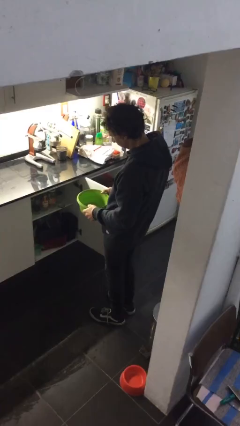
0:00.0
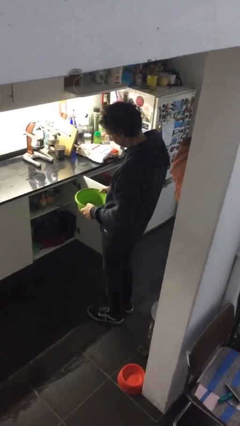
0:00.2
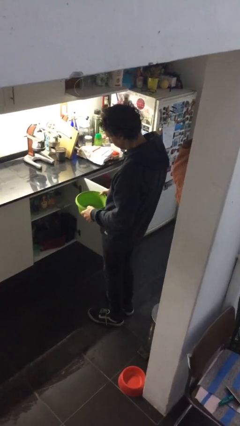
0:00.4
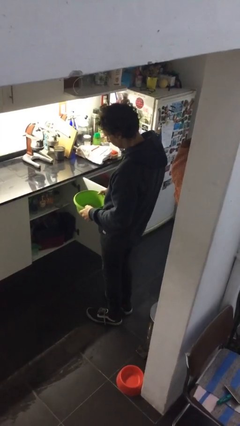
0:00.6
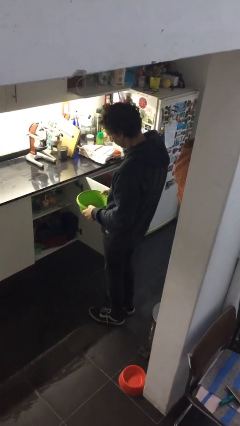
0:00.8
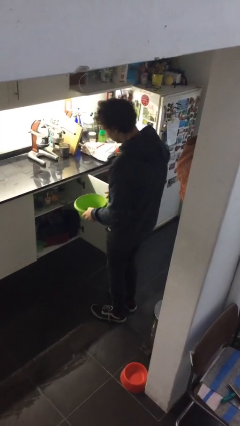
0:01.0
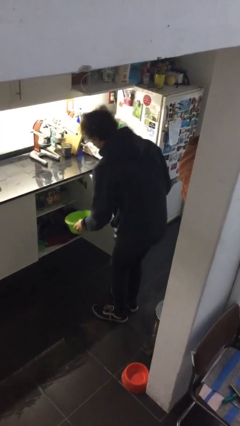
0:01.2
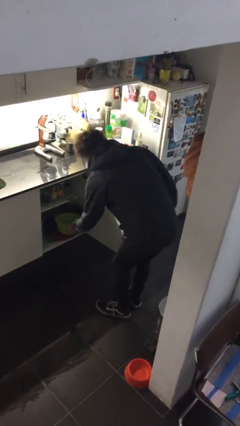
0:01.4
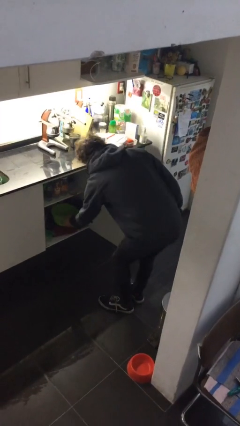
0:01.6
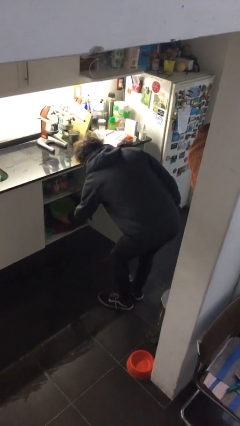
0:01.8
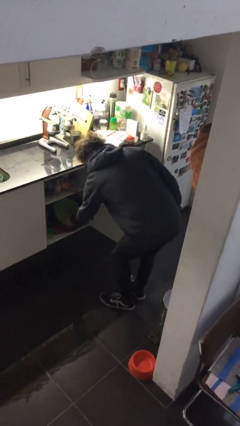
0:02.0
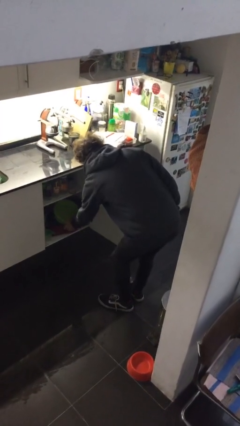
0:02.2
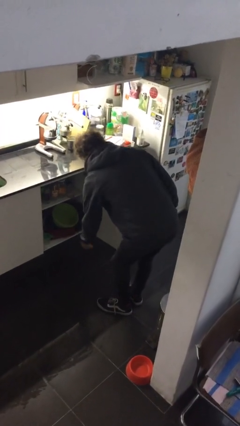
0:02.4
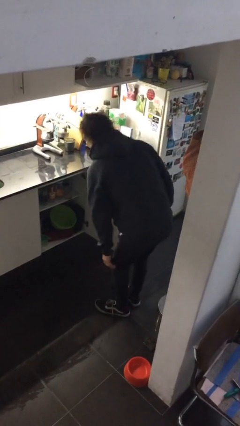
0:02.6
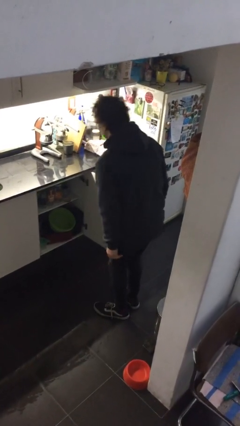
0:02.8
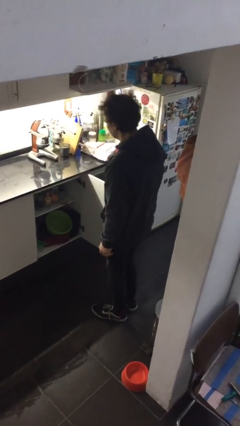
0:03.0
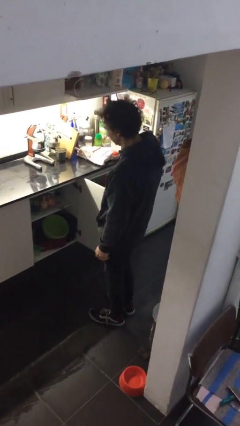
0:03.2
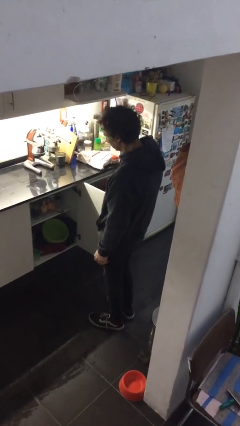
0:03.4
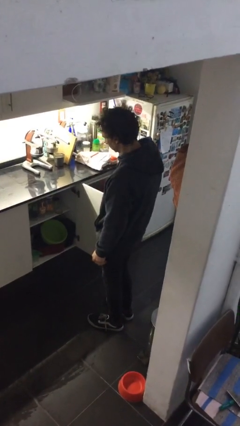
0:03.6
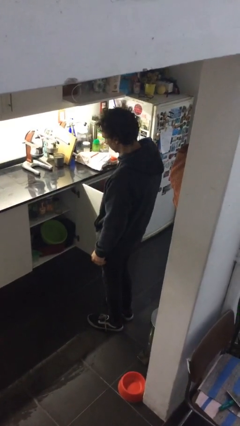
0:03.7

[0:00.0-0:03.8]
person puts down object into cabinet

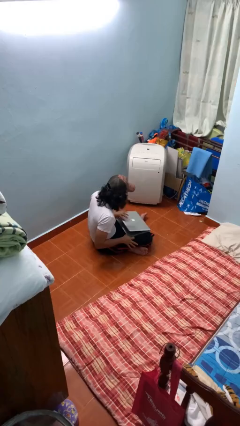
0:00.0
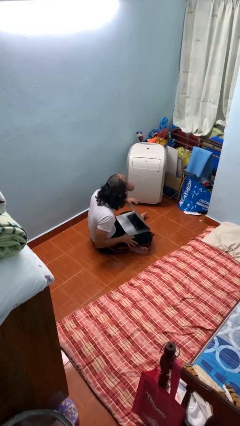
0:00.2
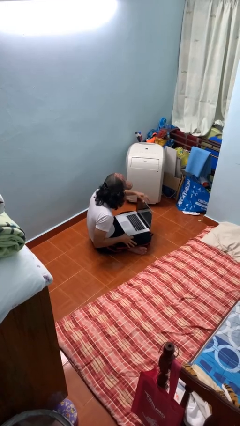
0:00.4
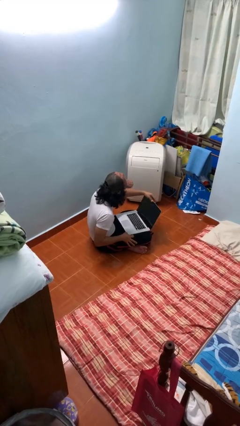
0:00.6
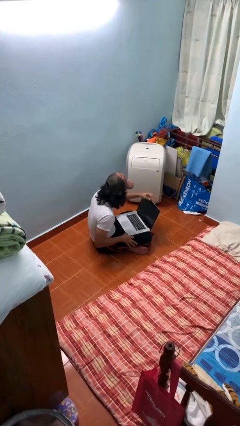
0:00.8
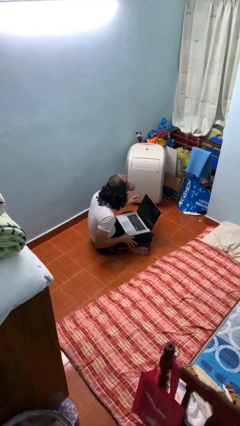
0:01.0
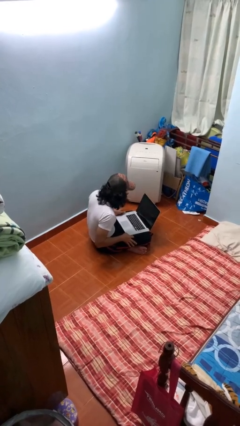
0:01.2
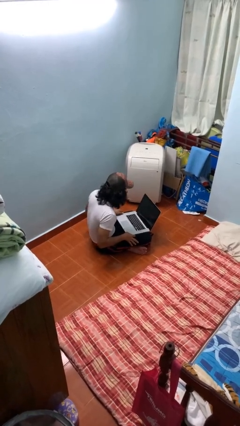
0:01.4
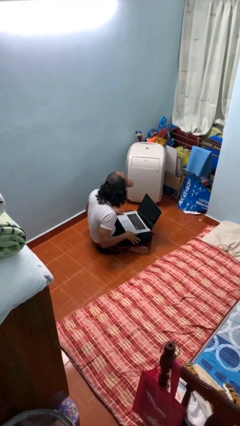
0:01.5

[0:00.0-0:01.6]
person opens laptop

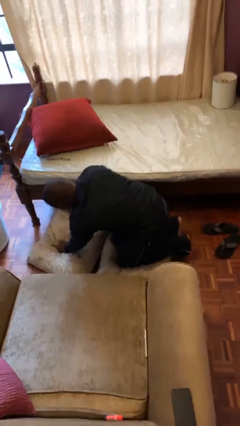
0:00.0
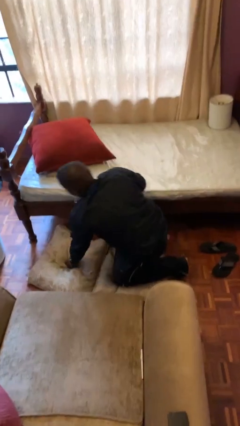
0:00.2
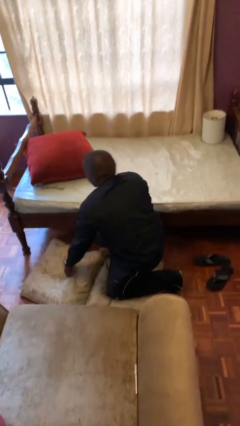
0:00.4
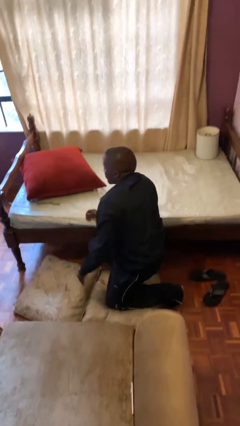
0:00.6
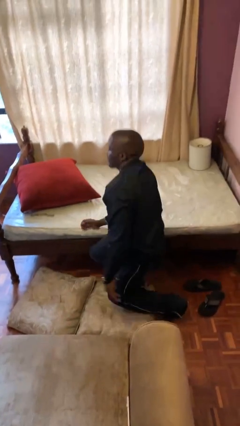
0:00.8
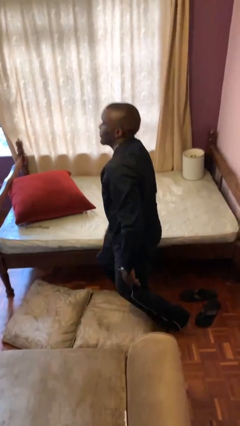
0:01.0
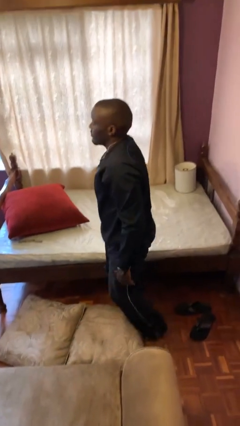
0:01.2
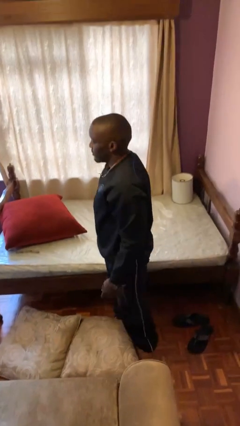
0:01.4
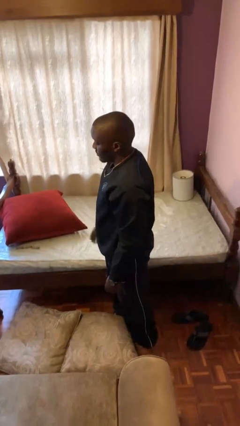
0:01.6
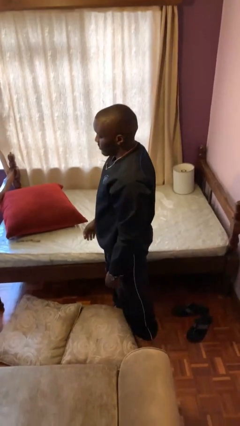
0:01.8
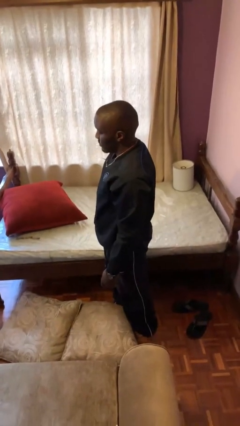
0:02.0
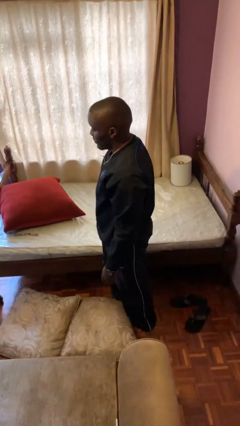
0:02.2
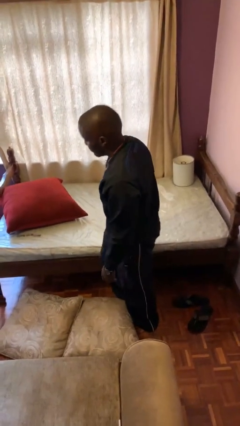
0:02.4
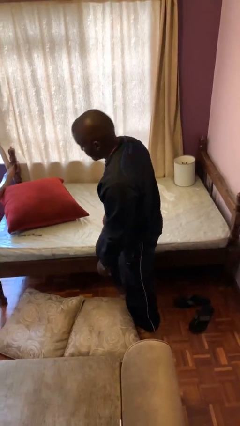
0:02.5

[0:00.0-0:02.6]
person stands up from floor

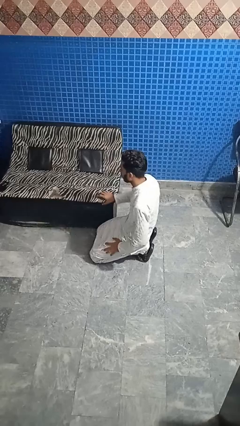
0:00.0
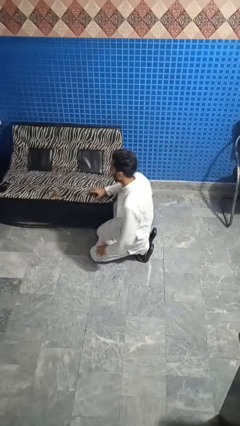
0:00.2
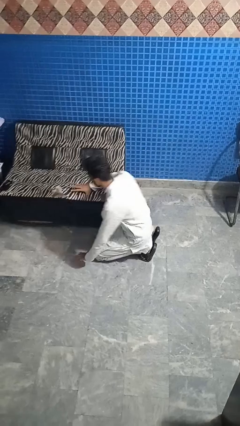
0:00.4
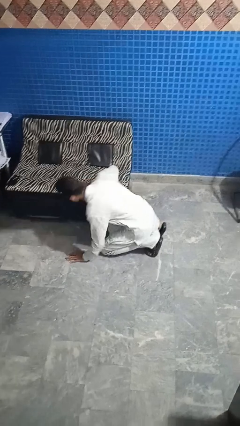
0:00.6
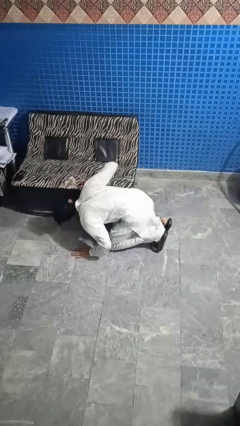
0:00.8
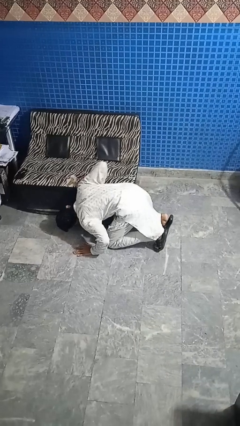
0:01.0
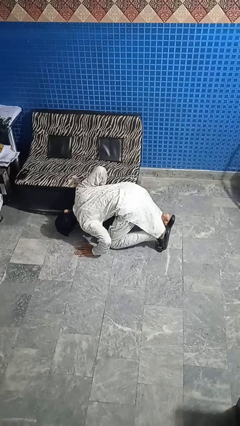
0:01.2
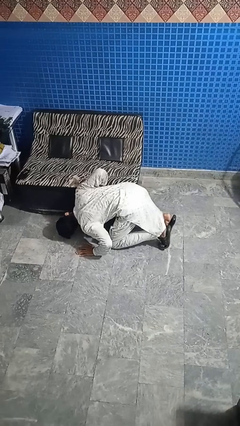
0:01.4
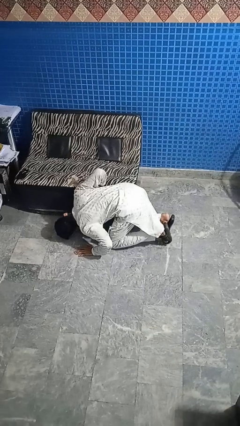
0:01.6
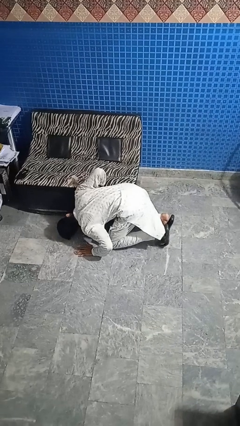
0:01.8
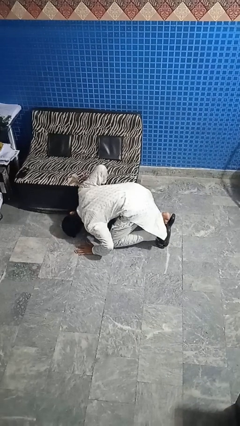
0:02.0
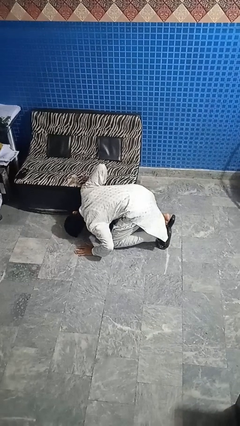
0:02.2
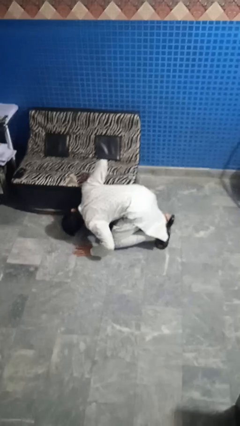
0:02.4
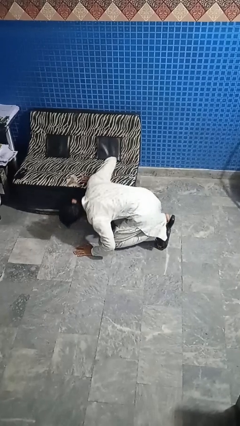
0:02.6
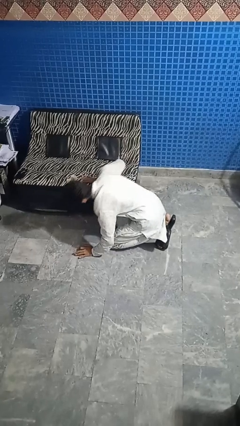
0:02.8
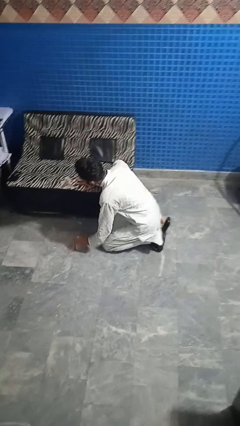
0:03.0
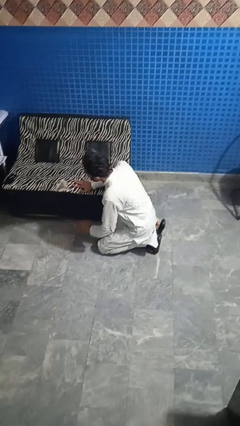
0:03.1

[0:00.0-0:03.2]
person searches under couch

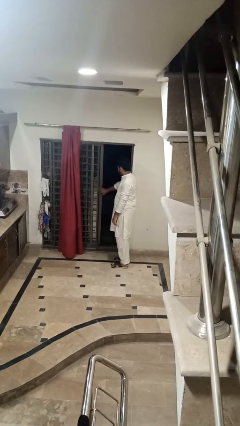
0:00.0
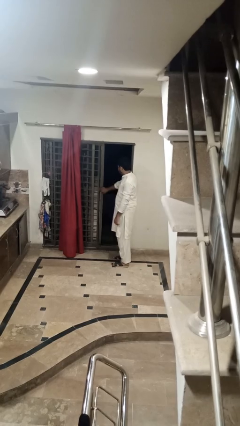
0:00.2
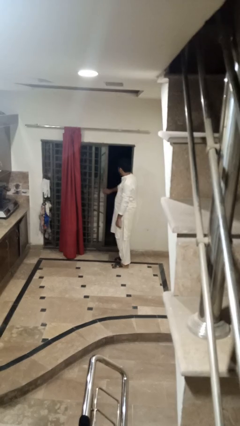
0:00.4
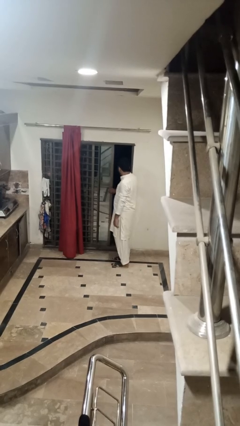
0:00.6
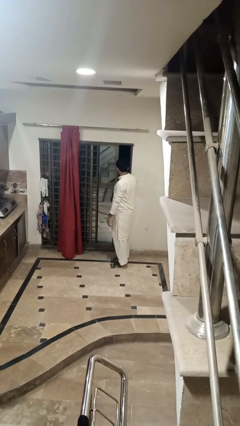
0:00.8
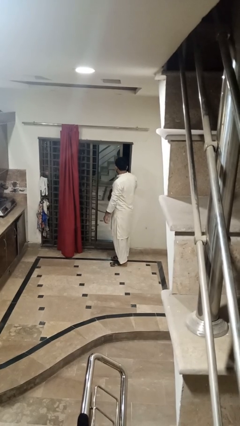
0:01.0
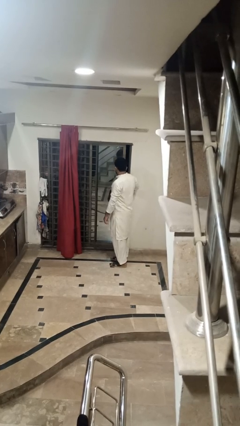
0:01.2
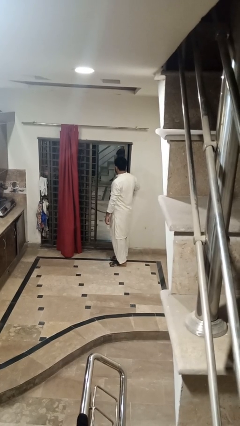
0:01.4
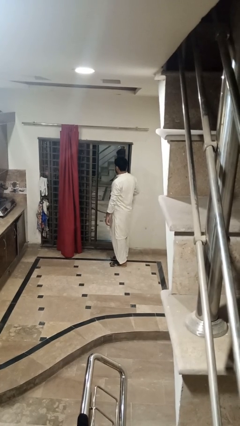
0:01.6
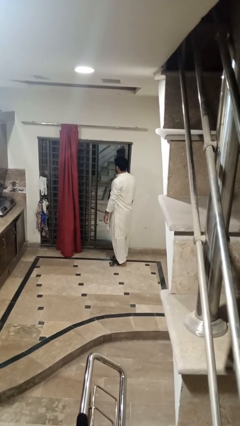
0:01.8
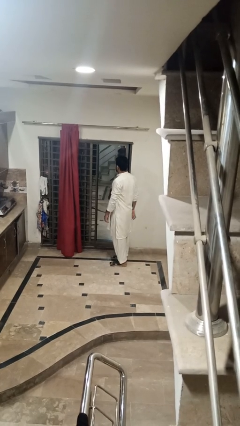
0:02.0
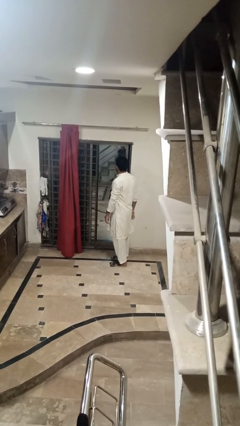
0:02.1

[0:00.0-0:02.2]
person closes home window

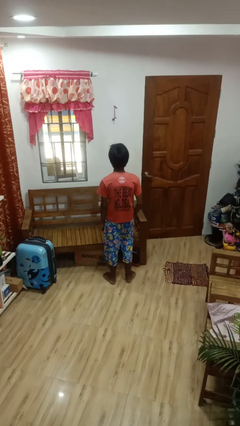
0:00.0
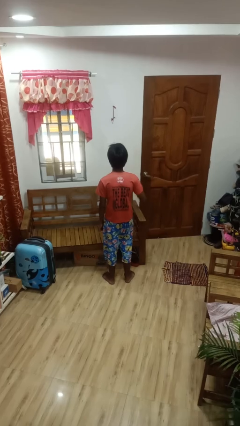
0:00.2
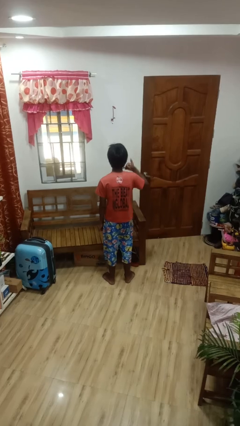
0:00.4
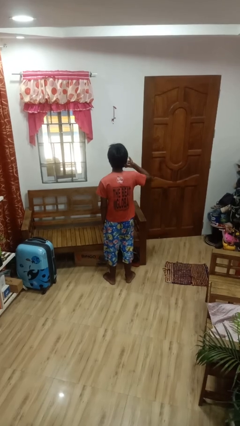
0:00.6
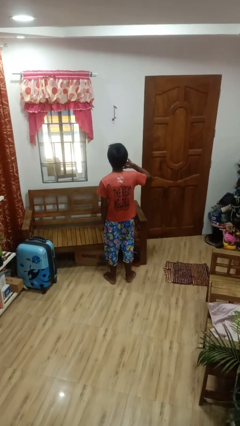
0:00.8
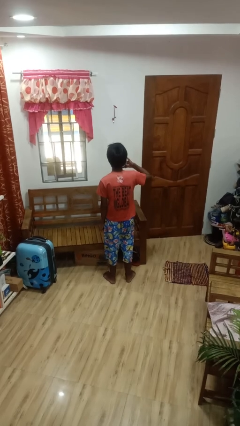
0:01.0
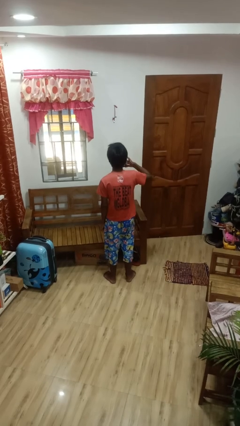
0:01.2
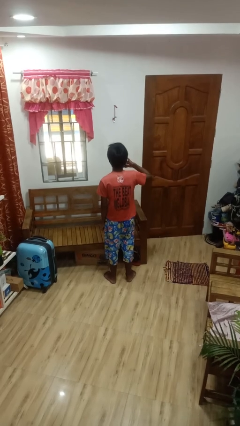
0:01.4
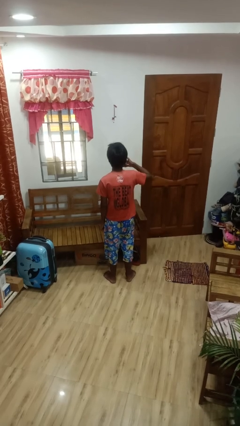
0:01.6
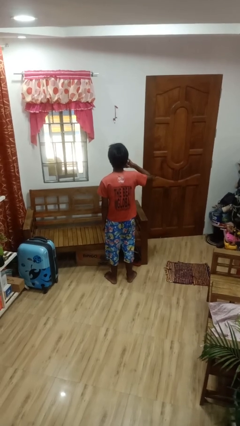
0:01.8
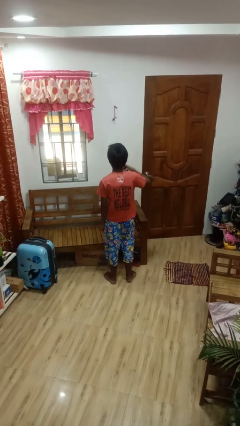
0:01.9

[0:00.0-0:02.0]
person gestures call me

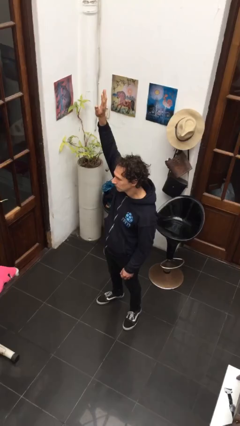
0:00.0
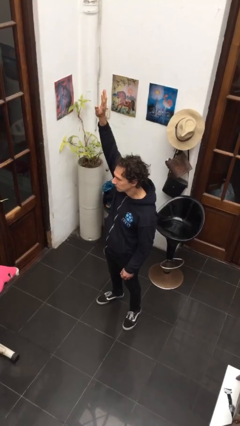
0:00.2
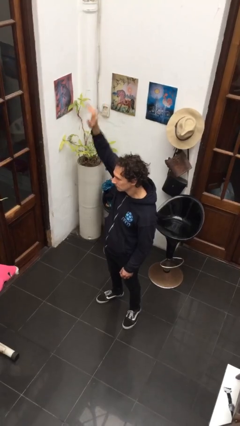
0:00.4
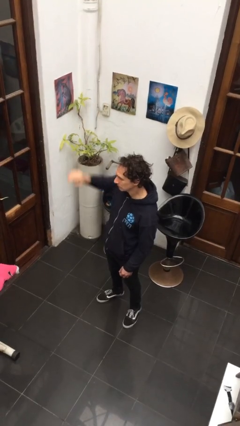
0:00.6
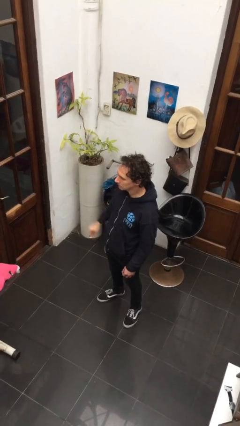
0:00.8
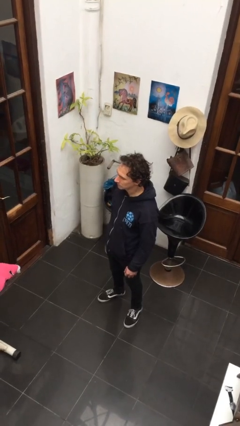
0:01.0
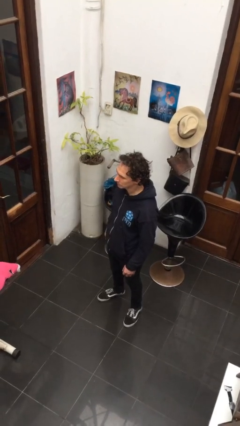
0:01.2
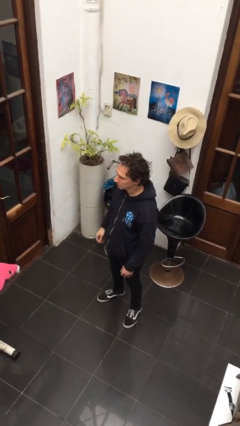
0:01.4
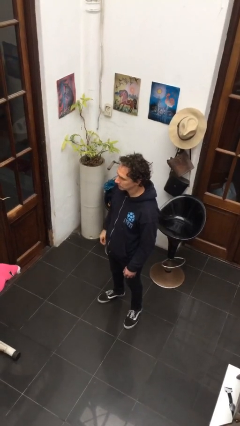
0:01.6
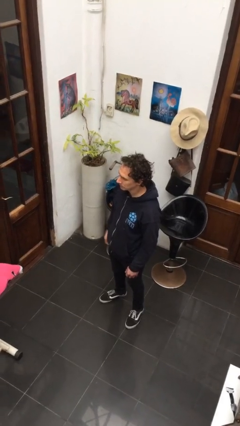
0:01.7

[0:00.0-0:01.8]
person gestures lower hand
